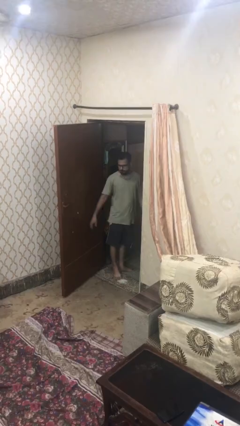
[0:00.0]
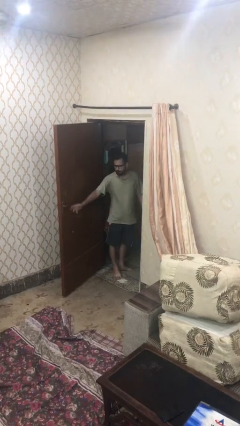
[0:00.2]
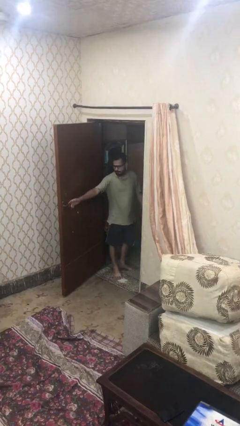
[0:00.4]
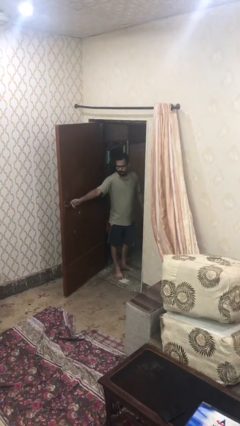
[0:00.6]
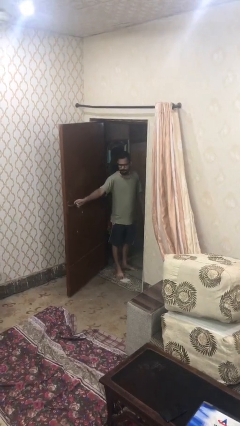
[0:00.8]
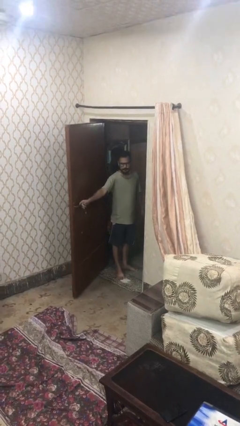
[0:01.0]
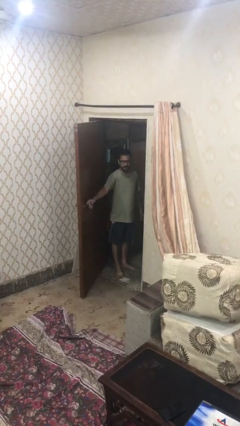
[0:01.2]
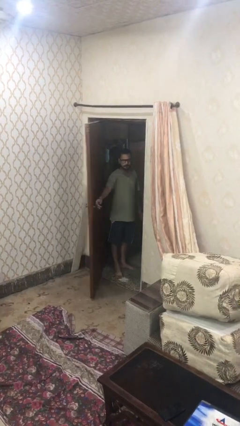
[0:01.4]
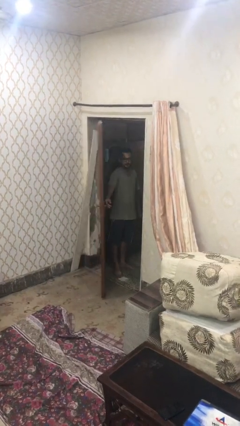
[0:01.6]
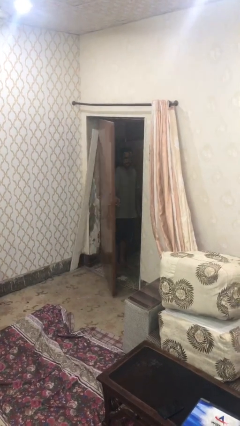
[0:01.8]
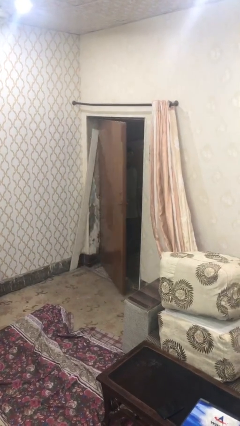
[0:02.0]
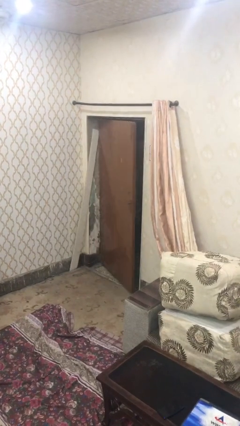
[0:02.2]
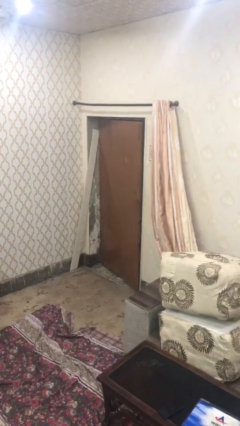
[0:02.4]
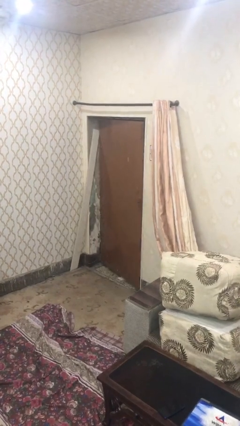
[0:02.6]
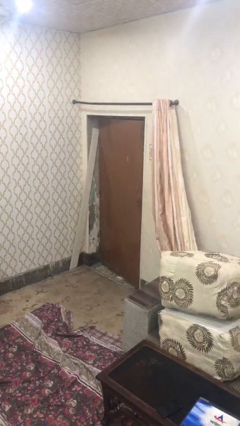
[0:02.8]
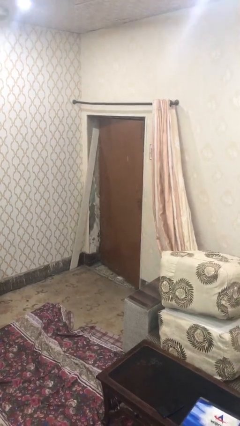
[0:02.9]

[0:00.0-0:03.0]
person closes facility door

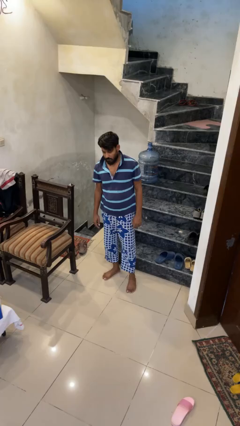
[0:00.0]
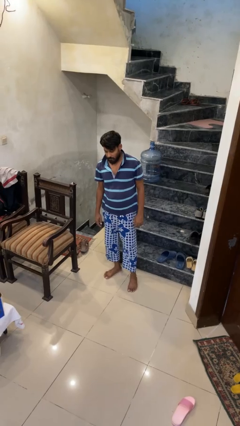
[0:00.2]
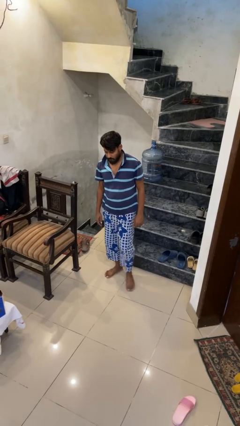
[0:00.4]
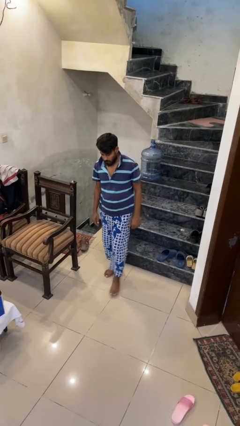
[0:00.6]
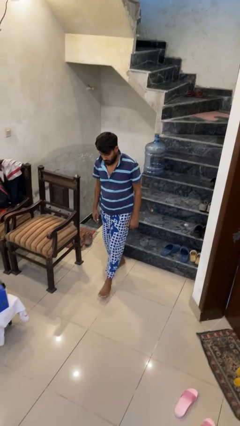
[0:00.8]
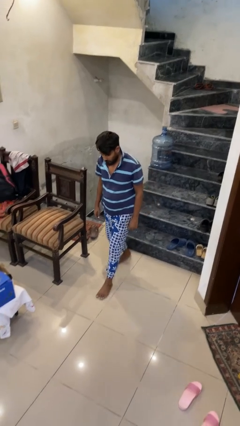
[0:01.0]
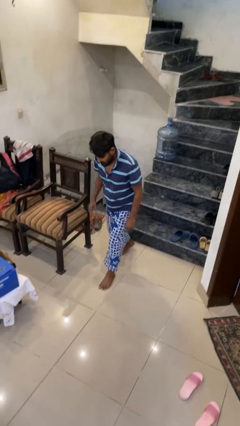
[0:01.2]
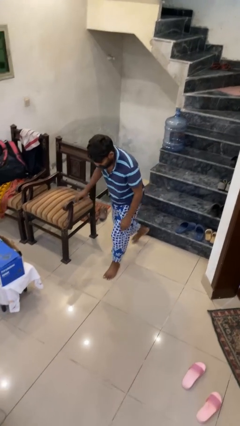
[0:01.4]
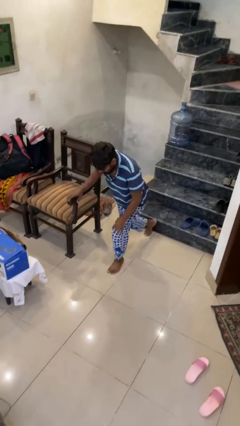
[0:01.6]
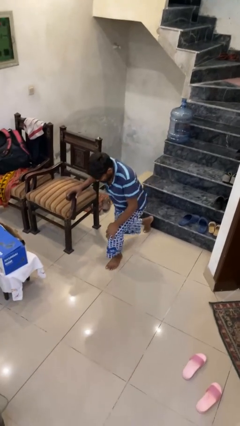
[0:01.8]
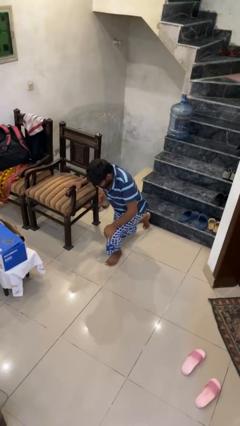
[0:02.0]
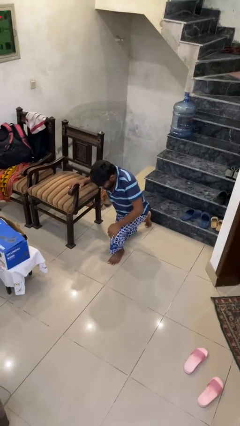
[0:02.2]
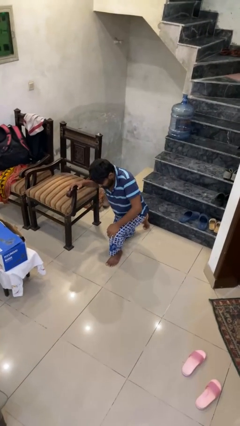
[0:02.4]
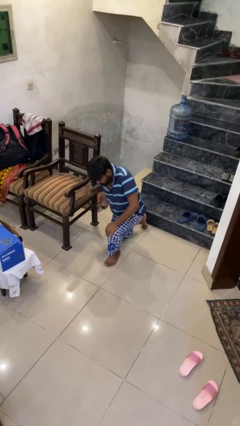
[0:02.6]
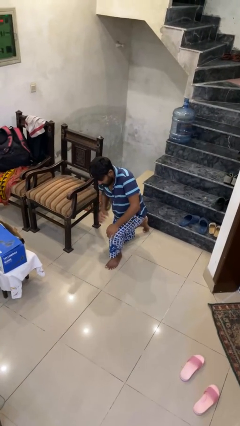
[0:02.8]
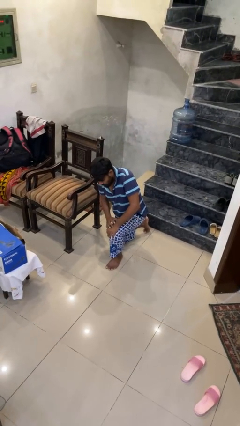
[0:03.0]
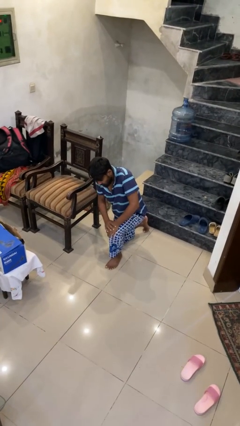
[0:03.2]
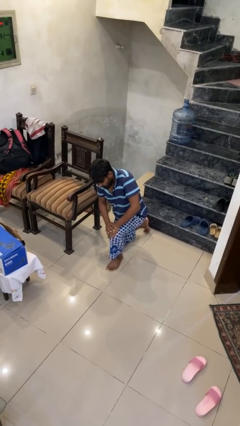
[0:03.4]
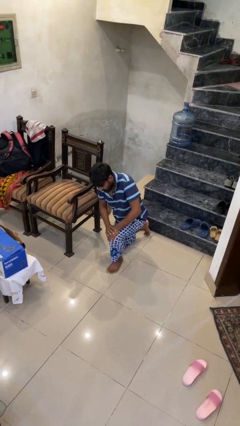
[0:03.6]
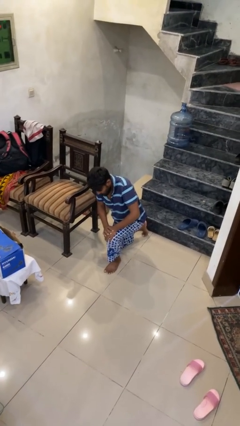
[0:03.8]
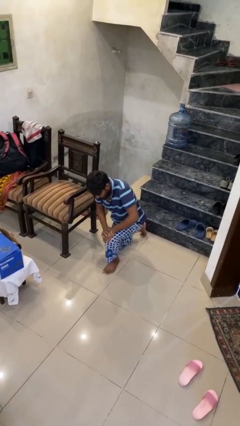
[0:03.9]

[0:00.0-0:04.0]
person kneels

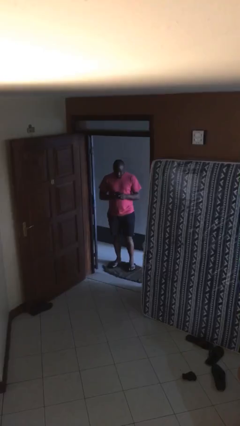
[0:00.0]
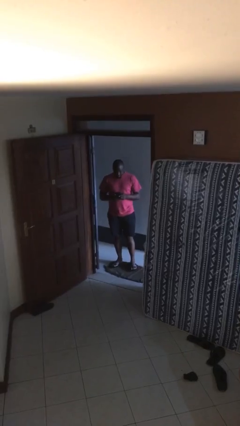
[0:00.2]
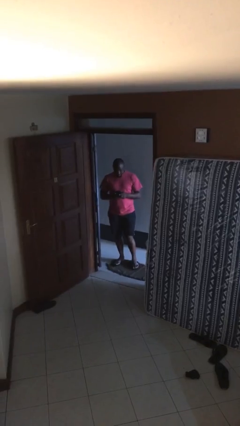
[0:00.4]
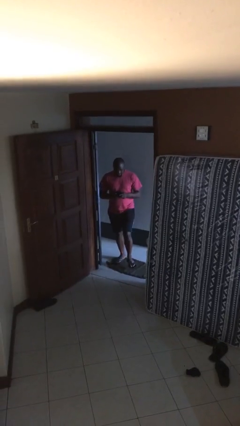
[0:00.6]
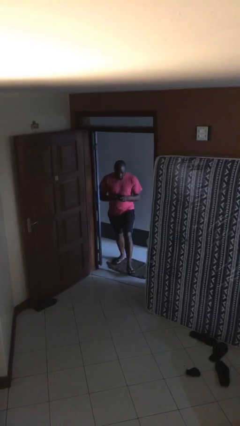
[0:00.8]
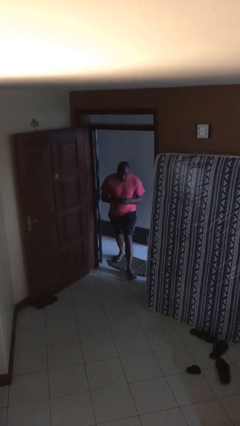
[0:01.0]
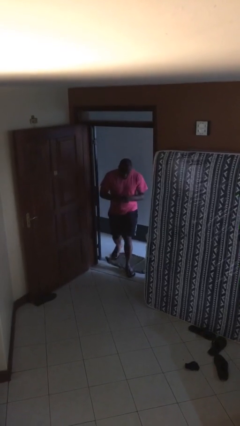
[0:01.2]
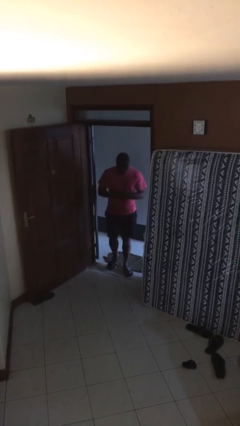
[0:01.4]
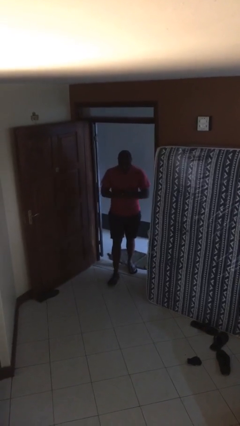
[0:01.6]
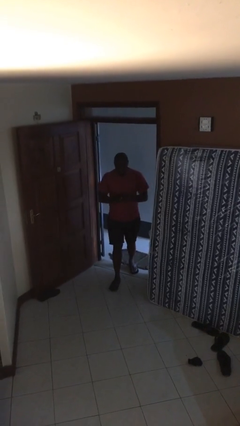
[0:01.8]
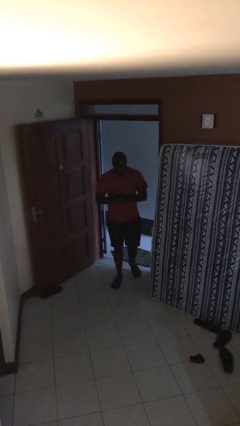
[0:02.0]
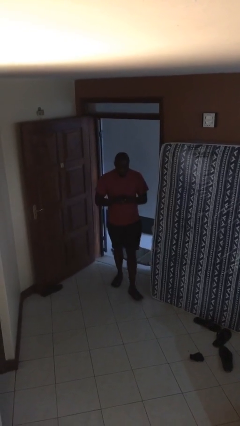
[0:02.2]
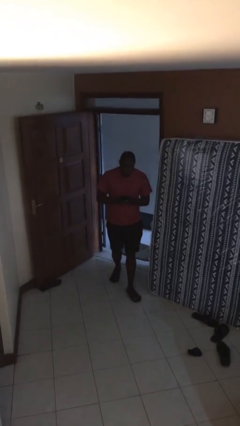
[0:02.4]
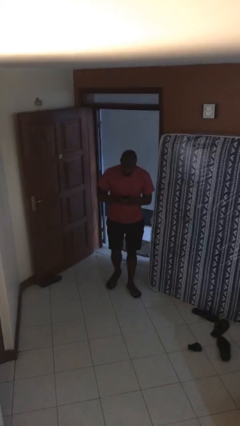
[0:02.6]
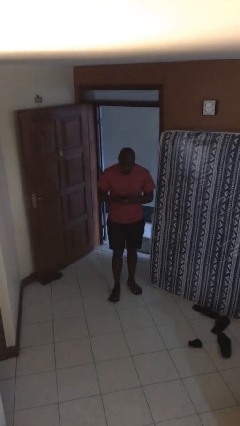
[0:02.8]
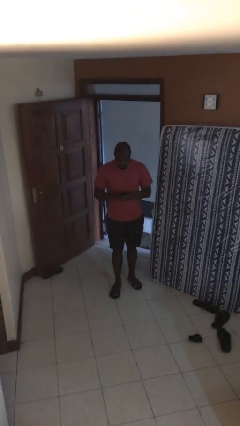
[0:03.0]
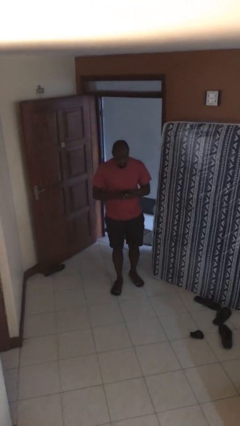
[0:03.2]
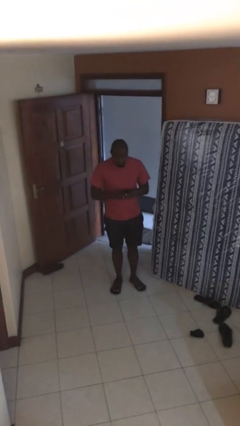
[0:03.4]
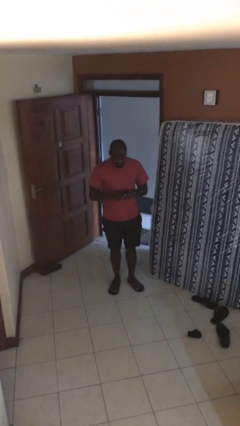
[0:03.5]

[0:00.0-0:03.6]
person enters scene through structure

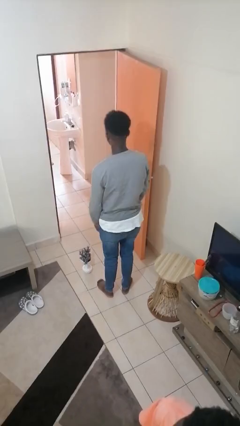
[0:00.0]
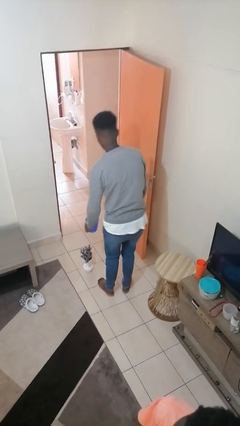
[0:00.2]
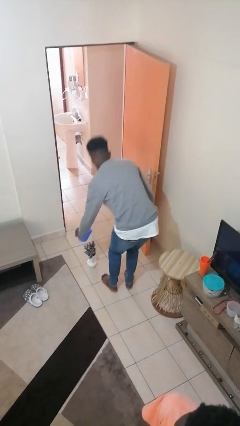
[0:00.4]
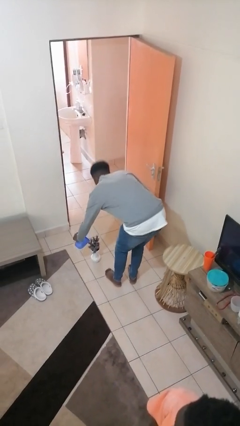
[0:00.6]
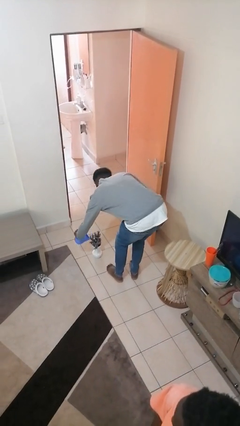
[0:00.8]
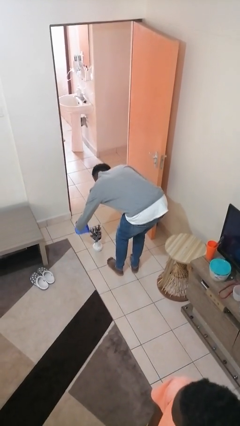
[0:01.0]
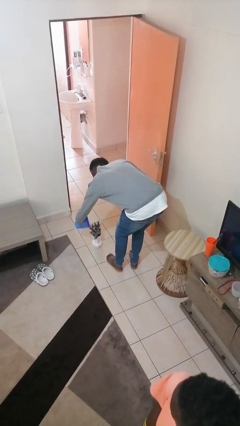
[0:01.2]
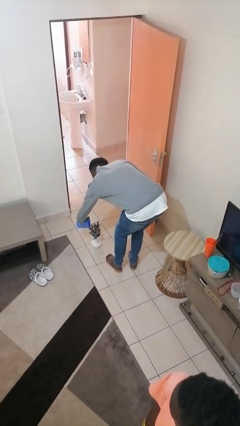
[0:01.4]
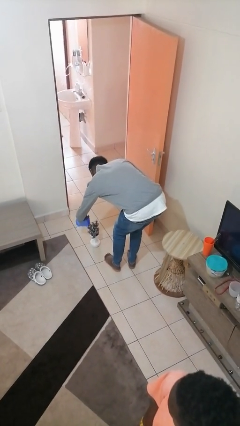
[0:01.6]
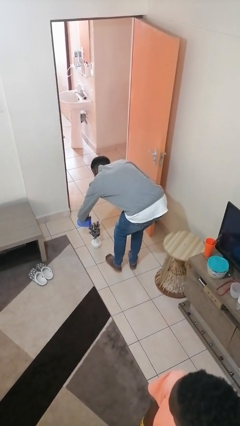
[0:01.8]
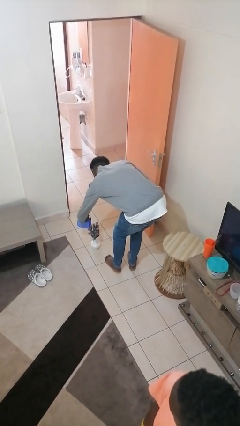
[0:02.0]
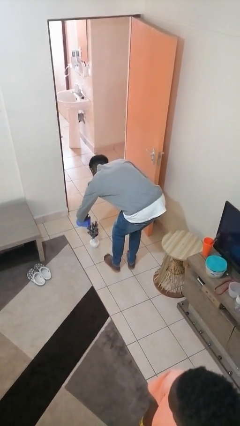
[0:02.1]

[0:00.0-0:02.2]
person waters houseplant

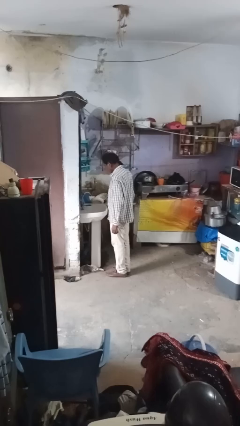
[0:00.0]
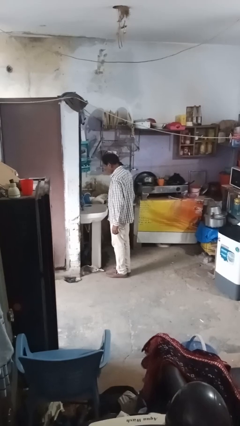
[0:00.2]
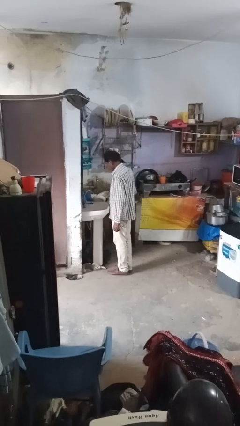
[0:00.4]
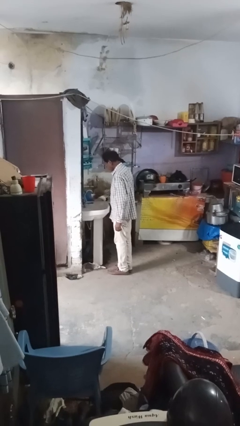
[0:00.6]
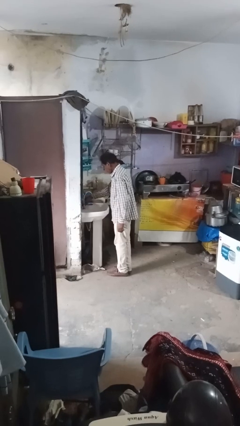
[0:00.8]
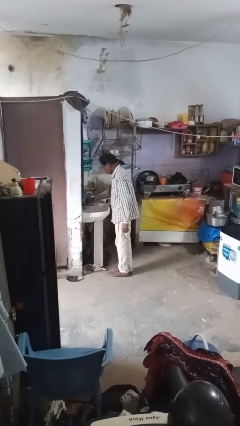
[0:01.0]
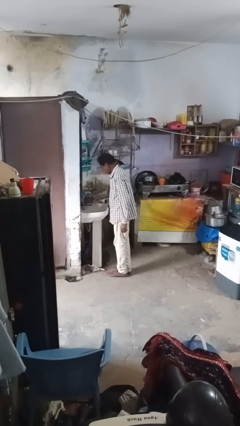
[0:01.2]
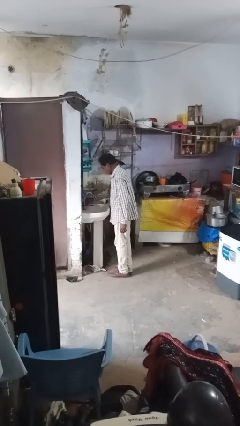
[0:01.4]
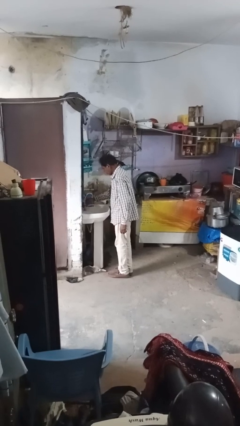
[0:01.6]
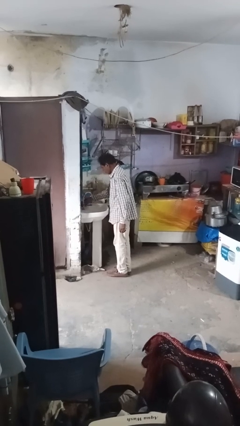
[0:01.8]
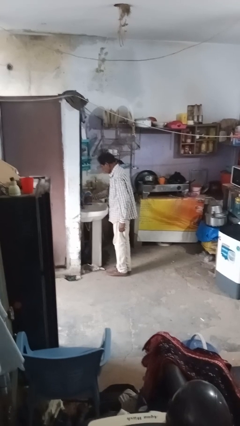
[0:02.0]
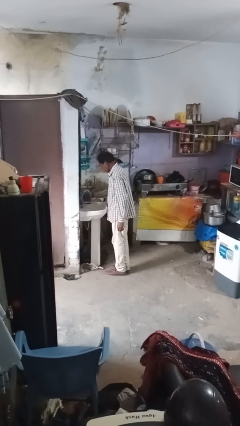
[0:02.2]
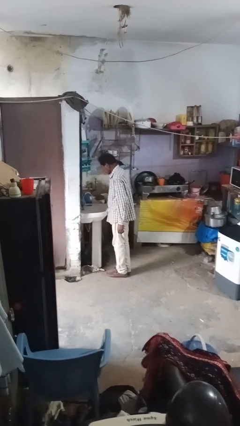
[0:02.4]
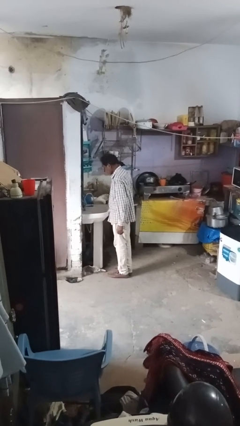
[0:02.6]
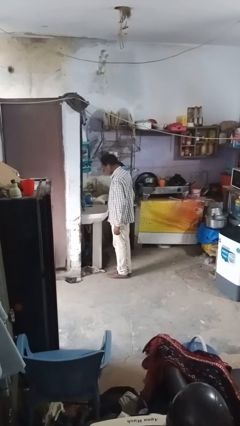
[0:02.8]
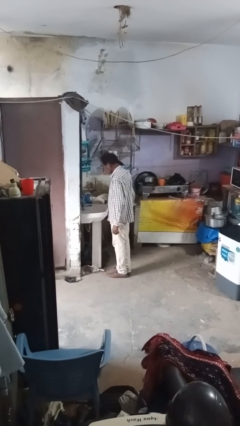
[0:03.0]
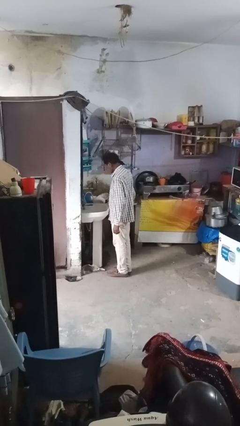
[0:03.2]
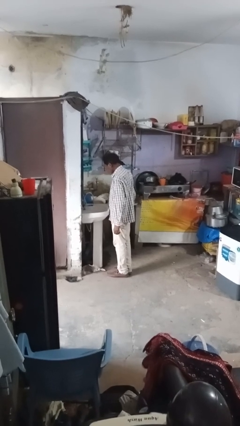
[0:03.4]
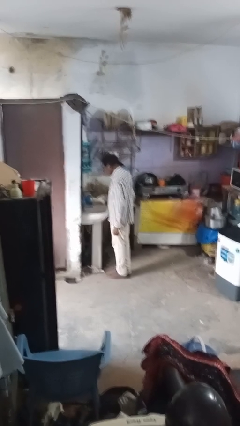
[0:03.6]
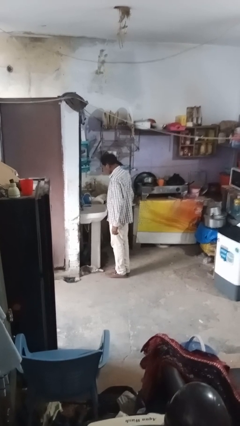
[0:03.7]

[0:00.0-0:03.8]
person turns on faucet

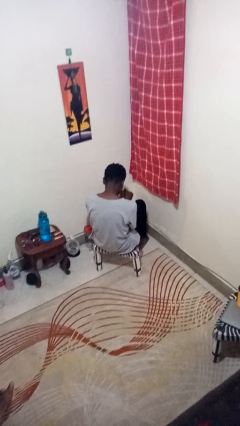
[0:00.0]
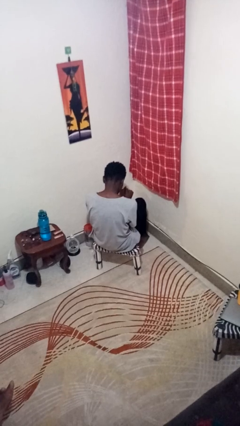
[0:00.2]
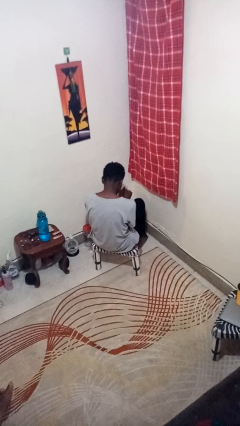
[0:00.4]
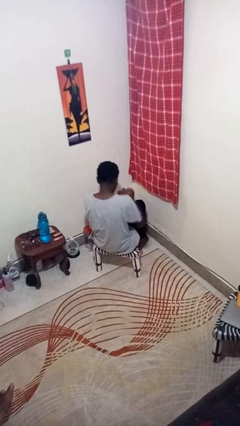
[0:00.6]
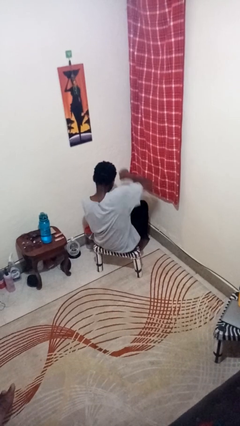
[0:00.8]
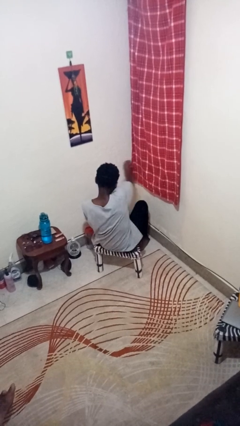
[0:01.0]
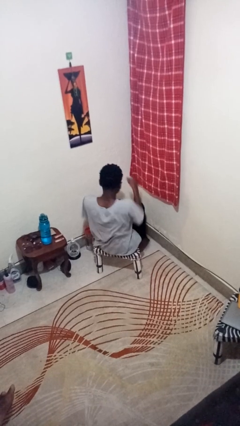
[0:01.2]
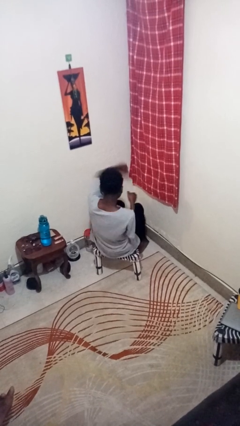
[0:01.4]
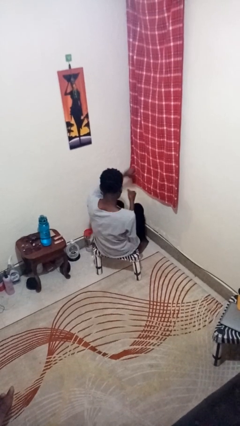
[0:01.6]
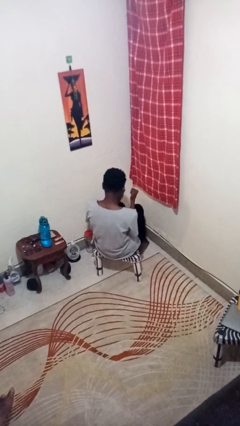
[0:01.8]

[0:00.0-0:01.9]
person punches
